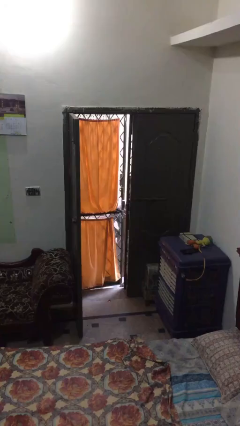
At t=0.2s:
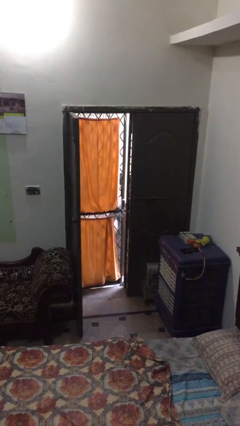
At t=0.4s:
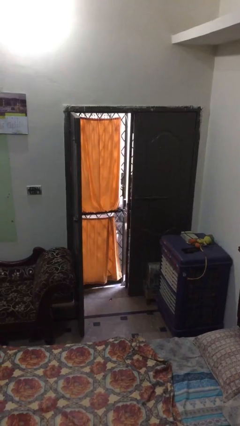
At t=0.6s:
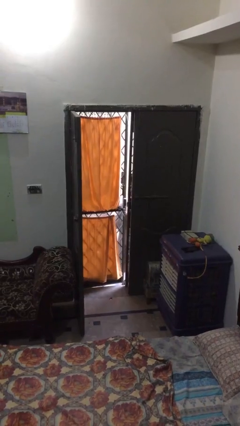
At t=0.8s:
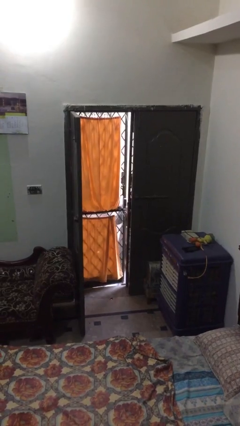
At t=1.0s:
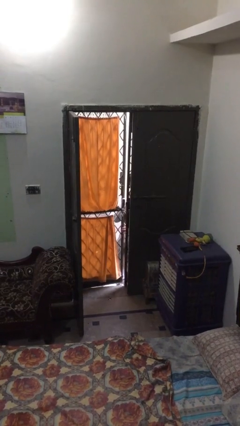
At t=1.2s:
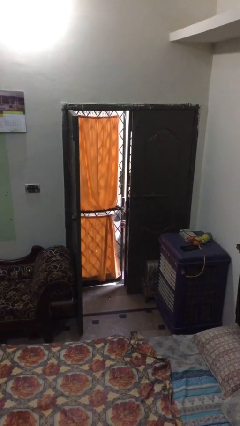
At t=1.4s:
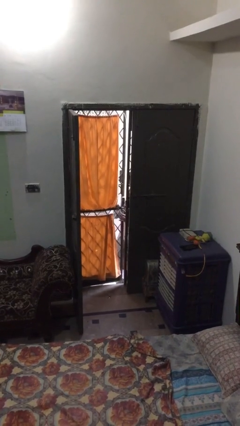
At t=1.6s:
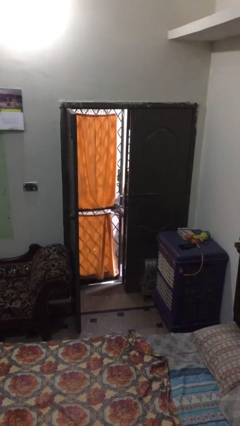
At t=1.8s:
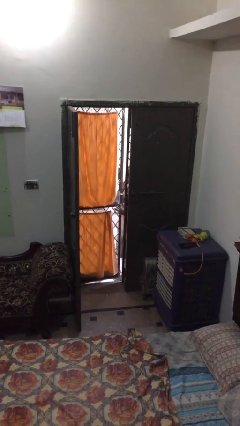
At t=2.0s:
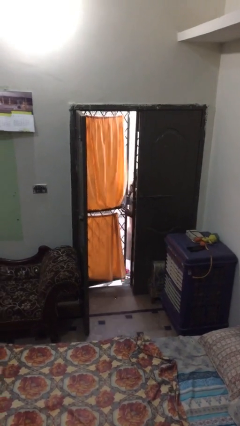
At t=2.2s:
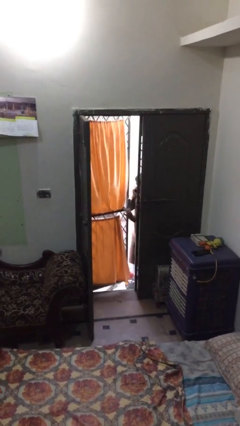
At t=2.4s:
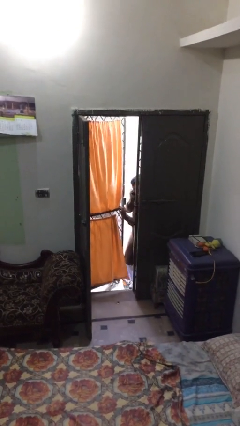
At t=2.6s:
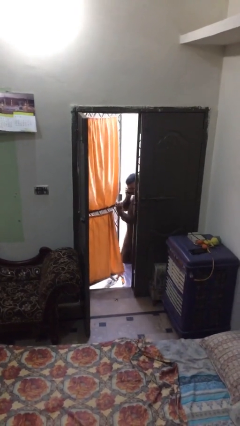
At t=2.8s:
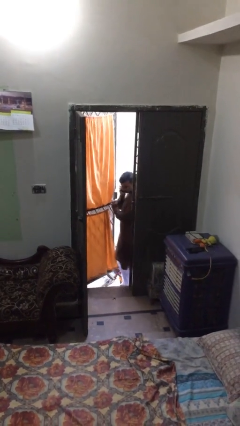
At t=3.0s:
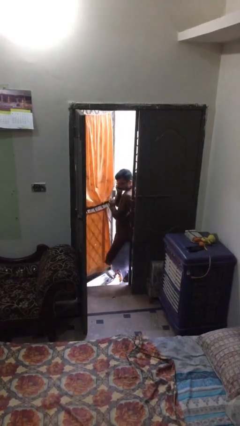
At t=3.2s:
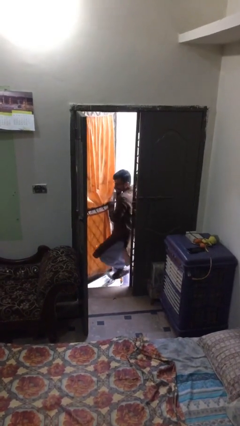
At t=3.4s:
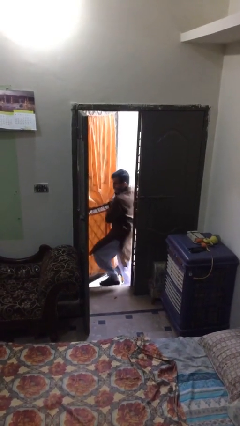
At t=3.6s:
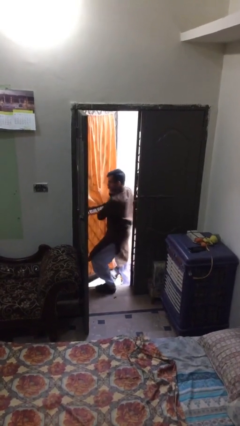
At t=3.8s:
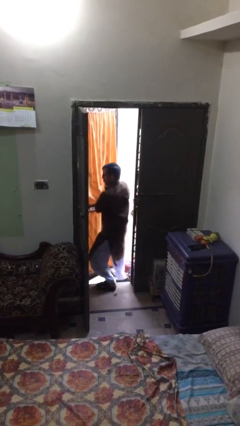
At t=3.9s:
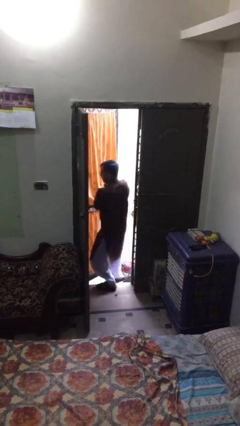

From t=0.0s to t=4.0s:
person opens facility door

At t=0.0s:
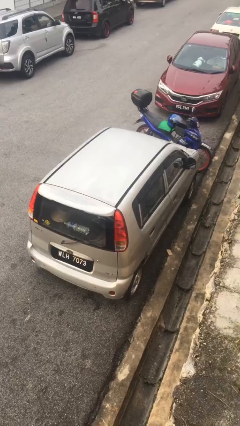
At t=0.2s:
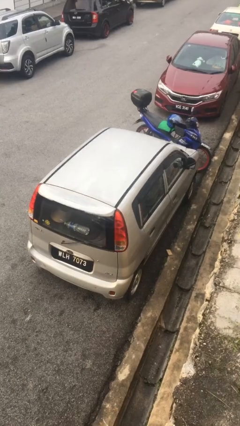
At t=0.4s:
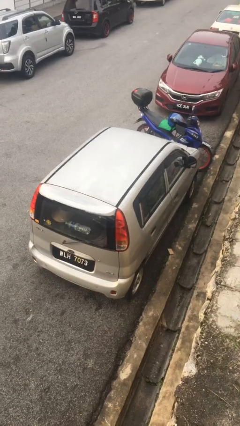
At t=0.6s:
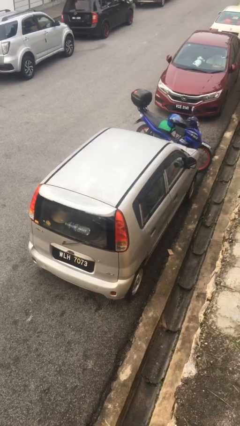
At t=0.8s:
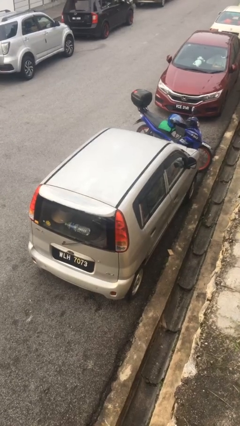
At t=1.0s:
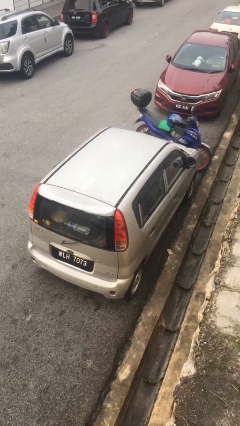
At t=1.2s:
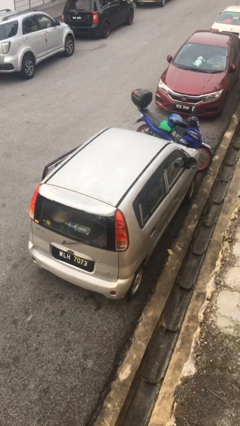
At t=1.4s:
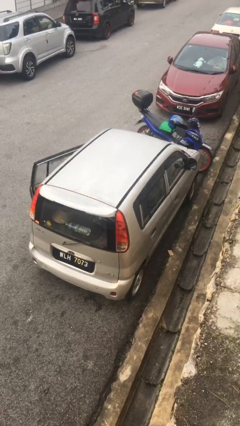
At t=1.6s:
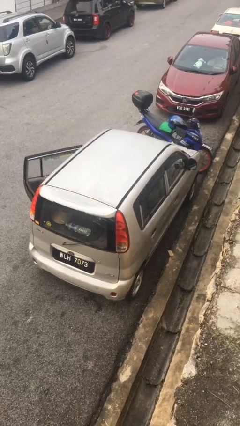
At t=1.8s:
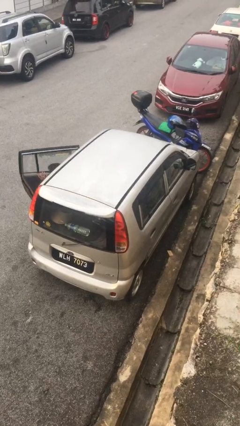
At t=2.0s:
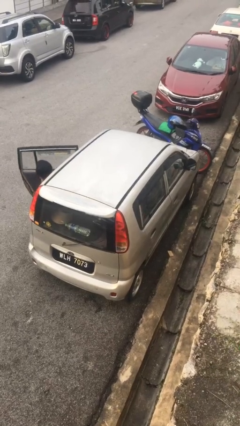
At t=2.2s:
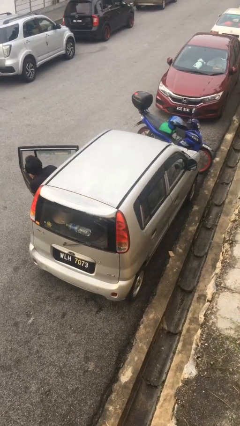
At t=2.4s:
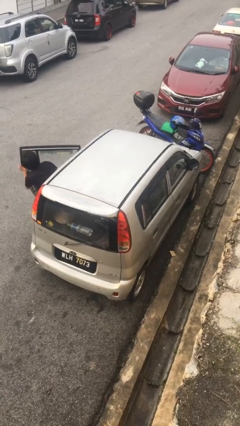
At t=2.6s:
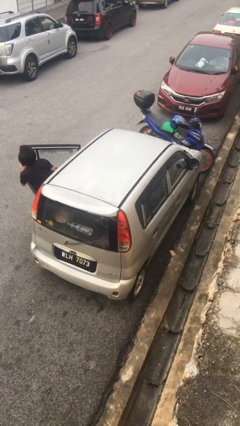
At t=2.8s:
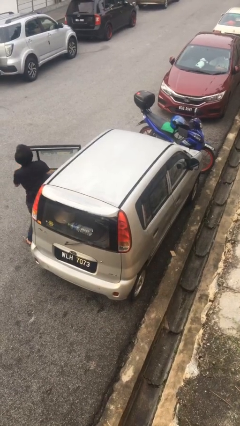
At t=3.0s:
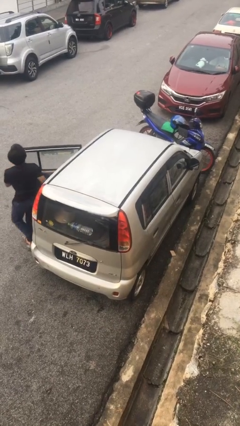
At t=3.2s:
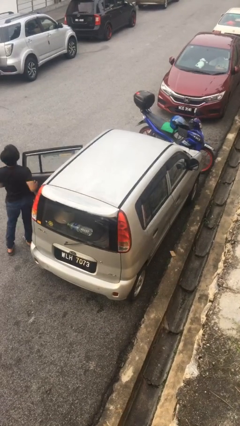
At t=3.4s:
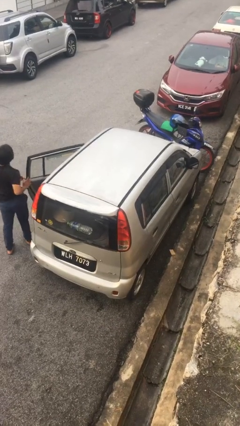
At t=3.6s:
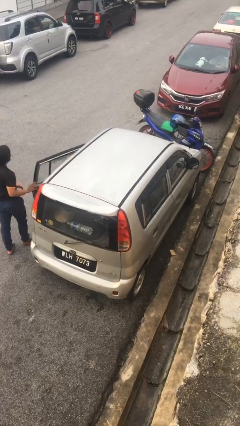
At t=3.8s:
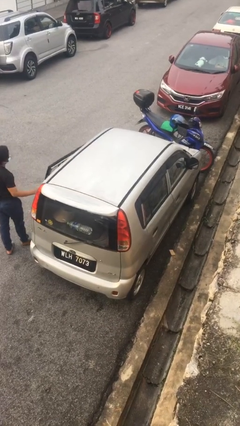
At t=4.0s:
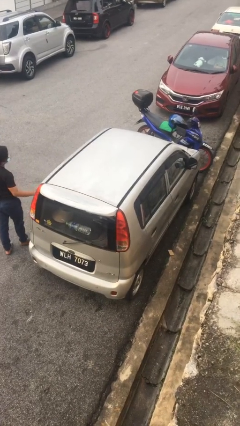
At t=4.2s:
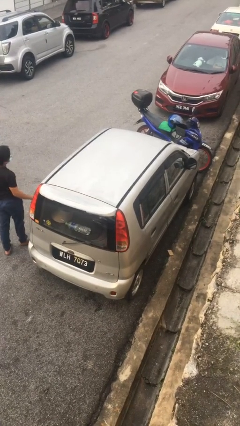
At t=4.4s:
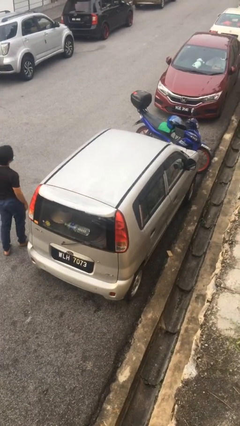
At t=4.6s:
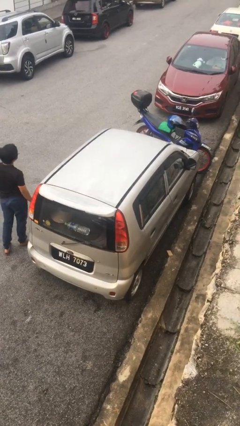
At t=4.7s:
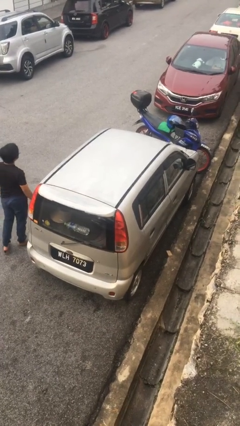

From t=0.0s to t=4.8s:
car drops off person

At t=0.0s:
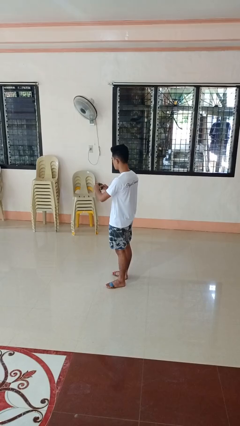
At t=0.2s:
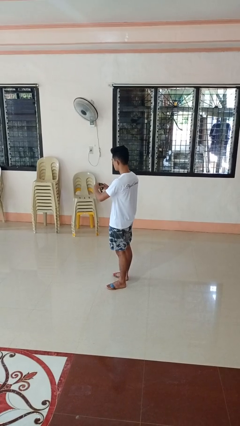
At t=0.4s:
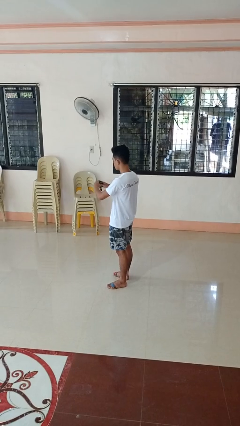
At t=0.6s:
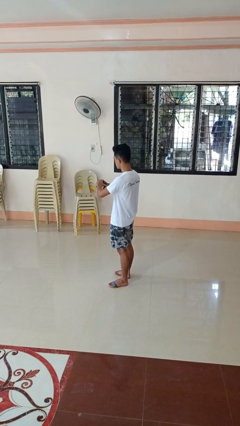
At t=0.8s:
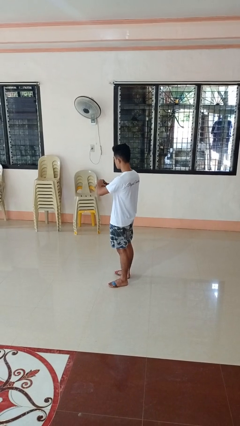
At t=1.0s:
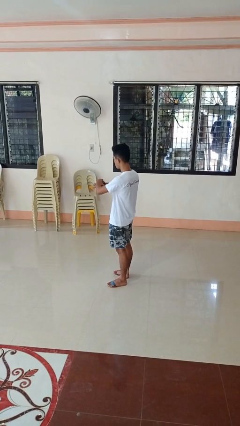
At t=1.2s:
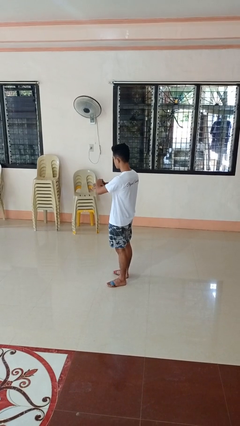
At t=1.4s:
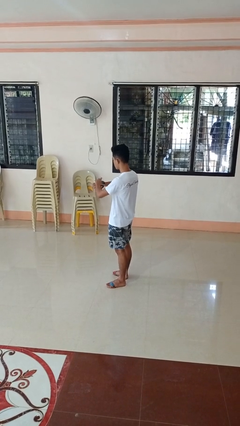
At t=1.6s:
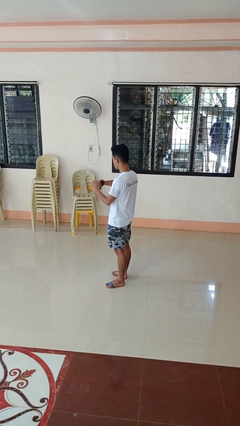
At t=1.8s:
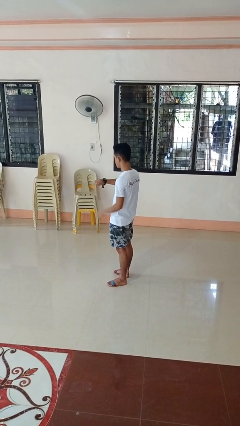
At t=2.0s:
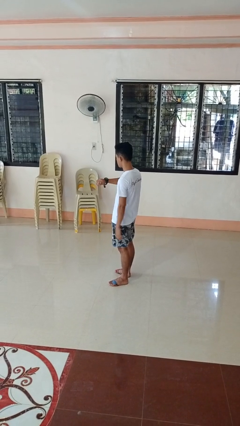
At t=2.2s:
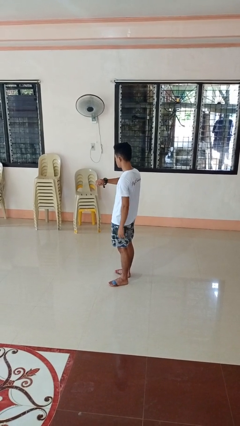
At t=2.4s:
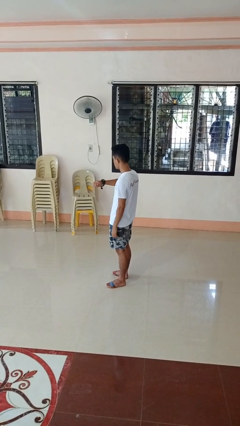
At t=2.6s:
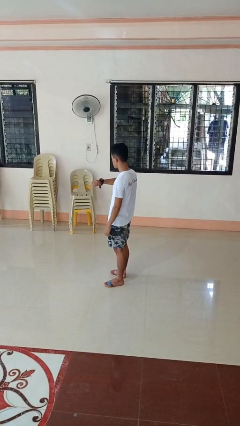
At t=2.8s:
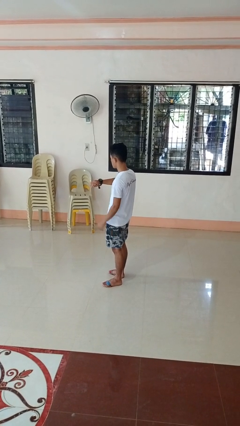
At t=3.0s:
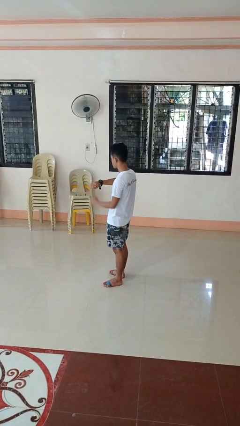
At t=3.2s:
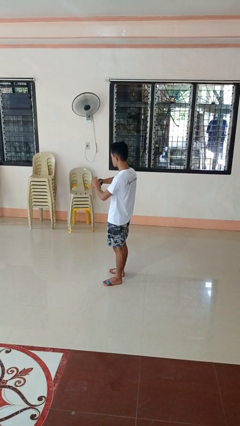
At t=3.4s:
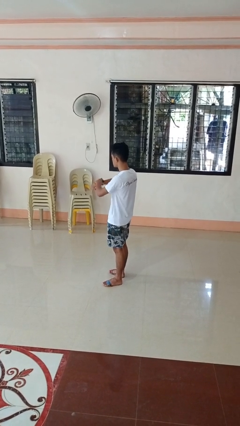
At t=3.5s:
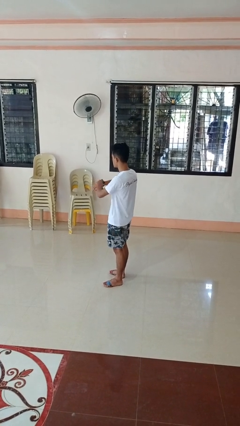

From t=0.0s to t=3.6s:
person puts on wristwatch

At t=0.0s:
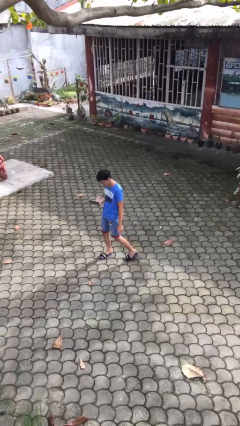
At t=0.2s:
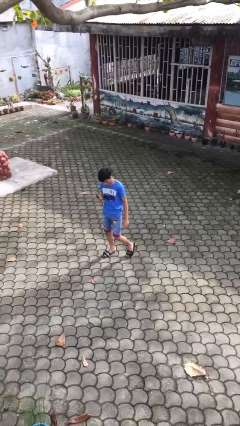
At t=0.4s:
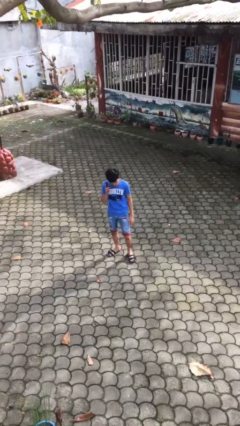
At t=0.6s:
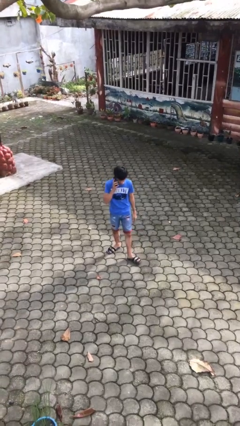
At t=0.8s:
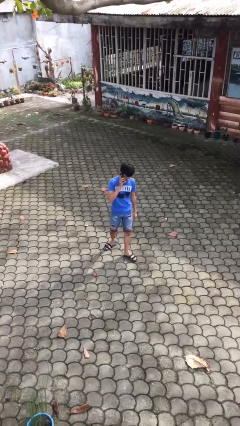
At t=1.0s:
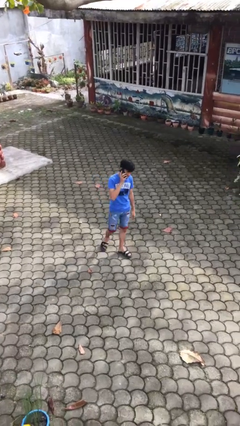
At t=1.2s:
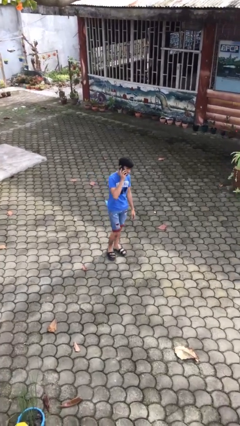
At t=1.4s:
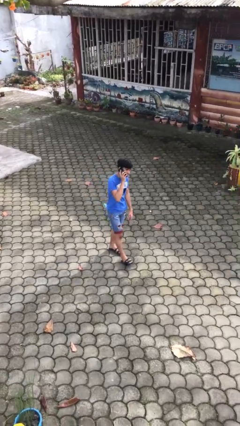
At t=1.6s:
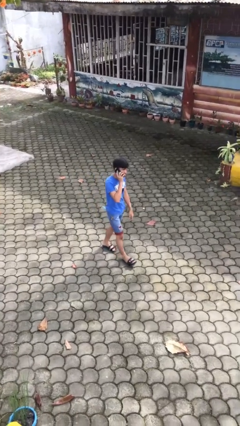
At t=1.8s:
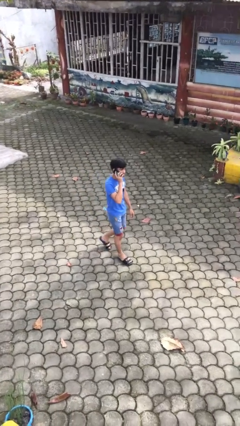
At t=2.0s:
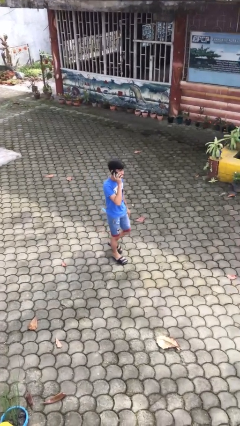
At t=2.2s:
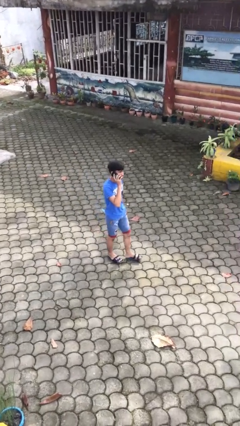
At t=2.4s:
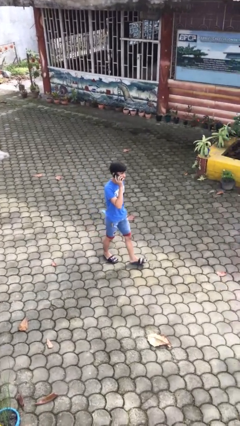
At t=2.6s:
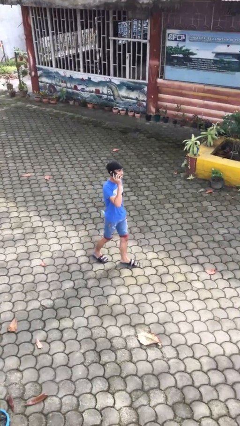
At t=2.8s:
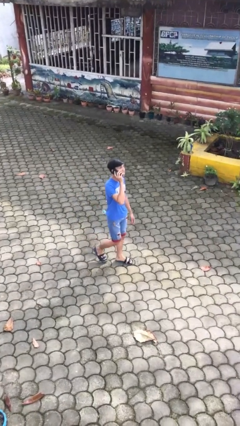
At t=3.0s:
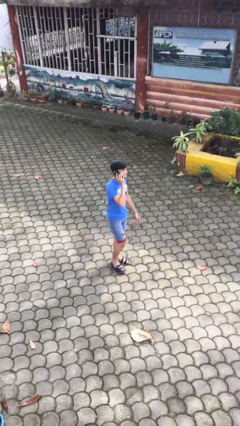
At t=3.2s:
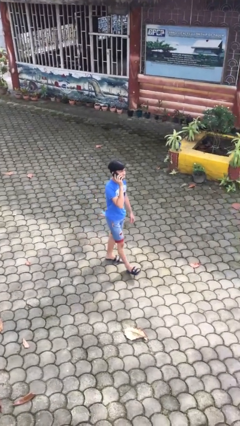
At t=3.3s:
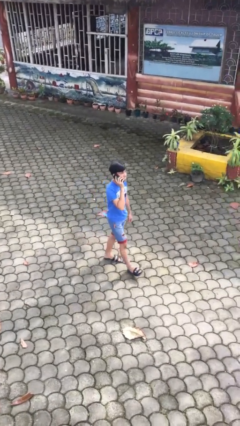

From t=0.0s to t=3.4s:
person talks on phone

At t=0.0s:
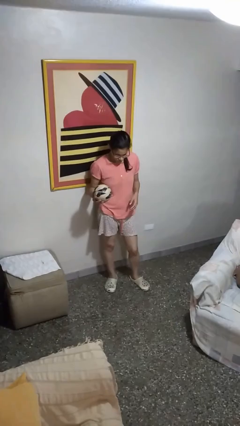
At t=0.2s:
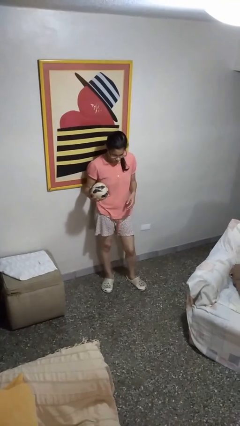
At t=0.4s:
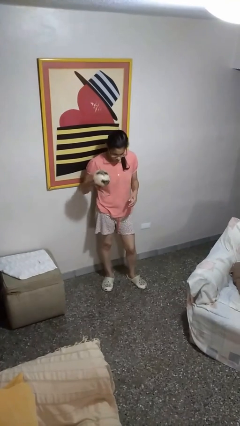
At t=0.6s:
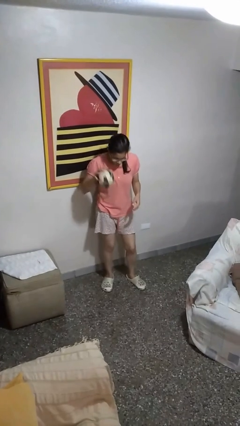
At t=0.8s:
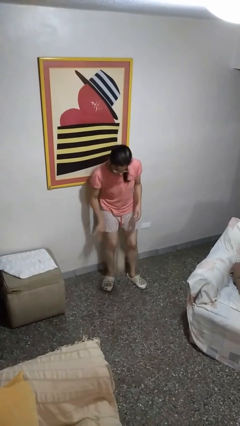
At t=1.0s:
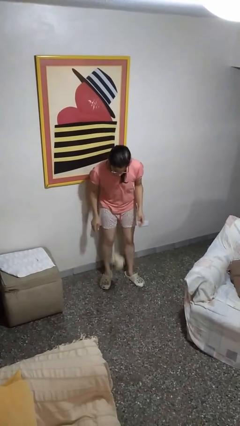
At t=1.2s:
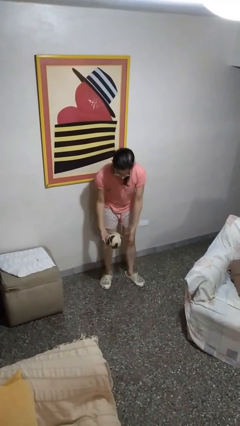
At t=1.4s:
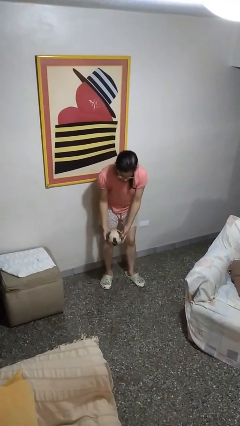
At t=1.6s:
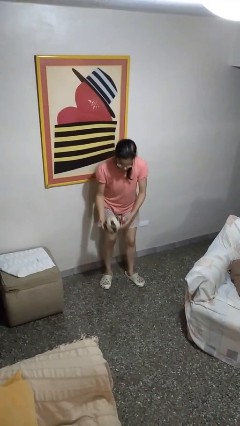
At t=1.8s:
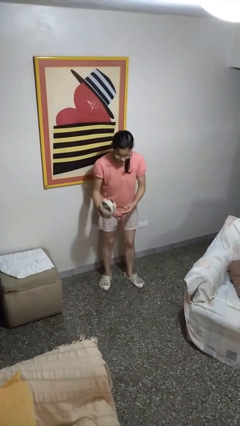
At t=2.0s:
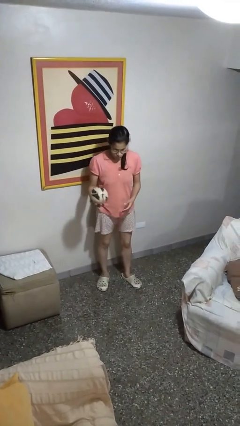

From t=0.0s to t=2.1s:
person bounces ball on floor
